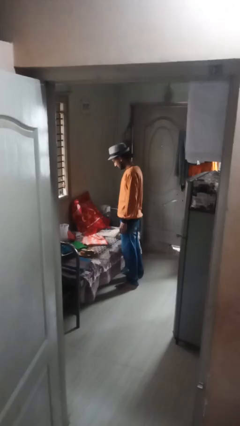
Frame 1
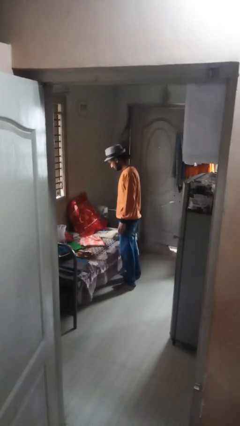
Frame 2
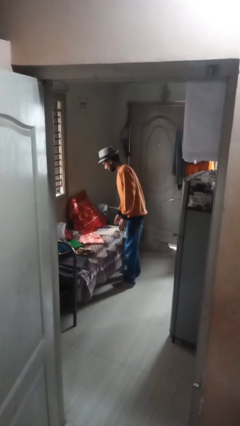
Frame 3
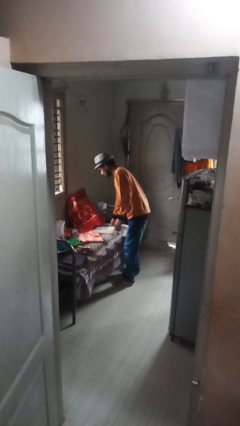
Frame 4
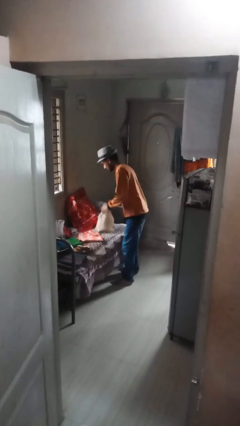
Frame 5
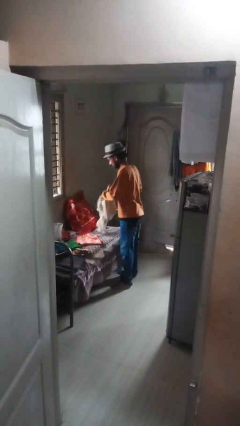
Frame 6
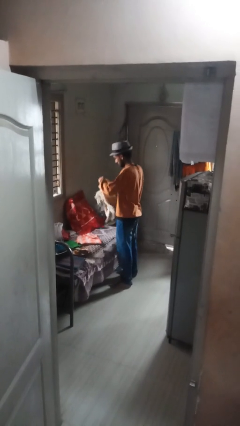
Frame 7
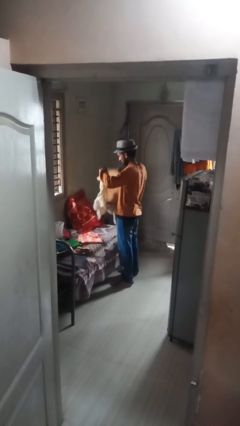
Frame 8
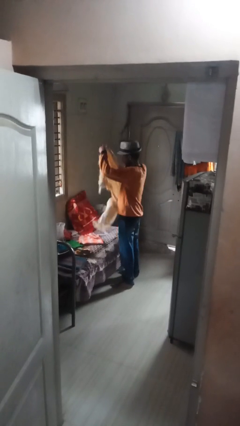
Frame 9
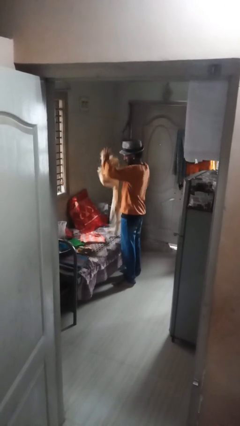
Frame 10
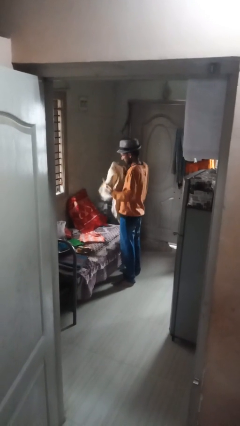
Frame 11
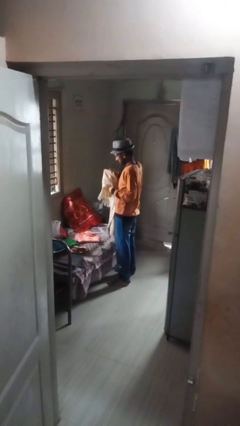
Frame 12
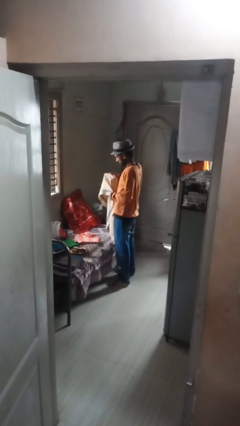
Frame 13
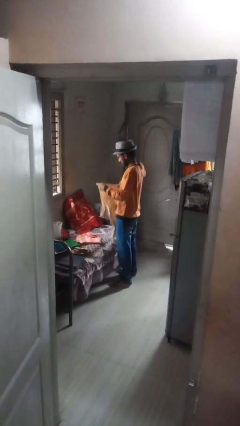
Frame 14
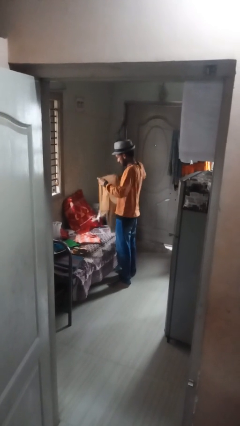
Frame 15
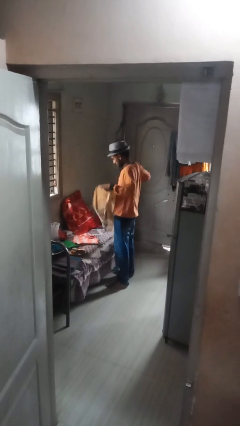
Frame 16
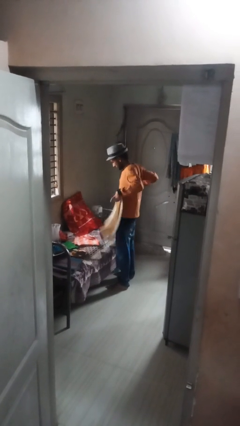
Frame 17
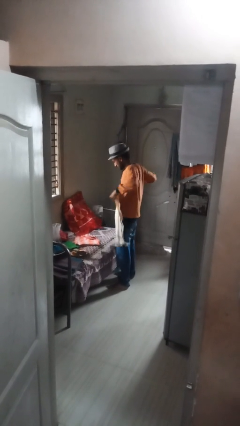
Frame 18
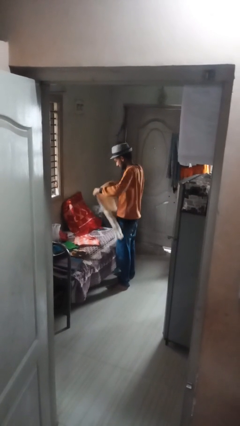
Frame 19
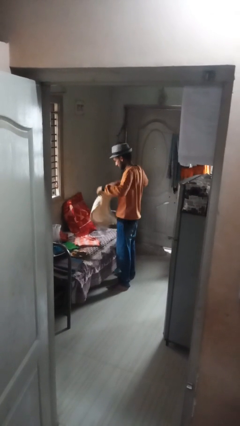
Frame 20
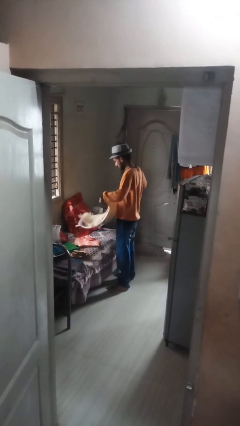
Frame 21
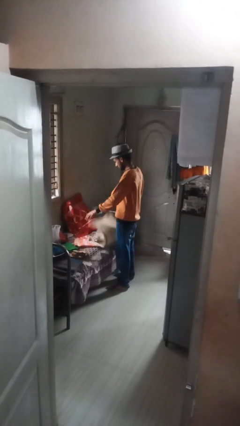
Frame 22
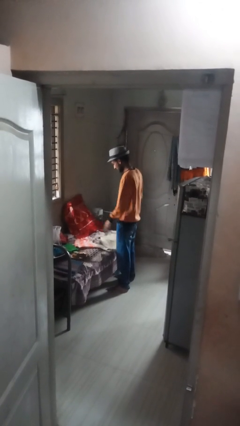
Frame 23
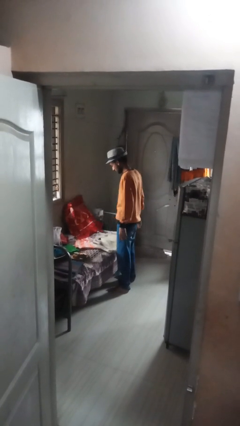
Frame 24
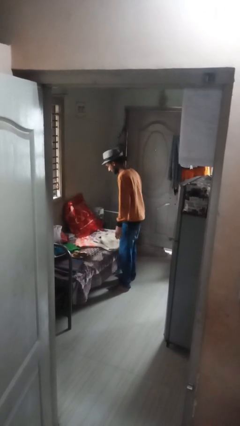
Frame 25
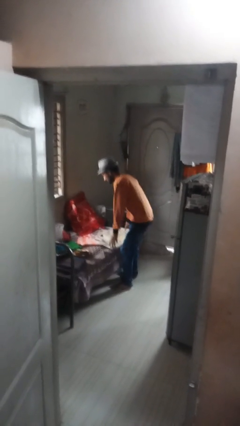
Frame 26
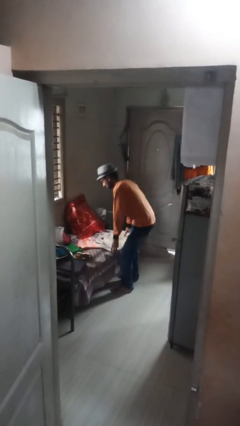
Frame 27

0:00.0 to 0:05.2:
person folds towel

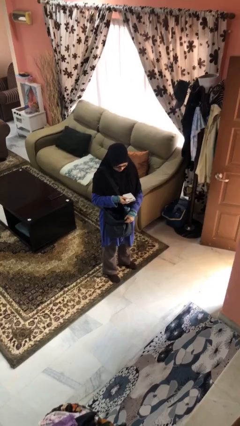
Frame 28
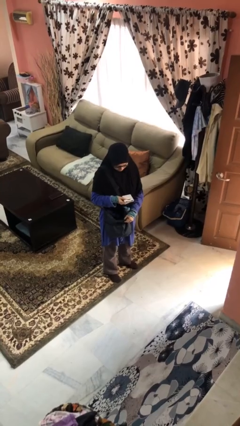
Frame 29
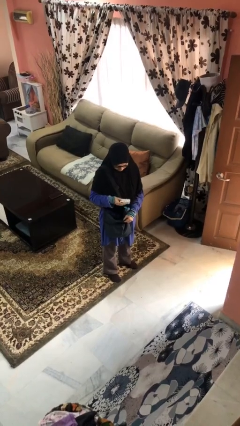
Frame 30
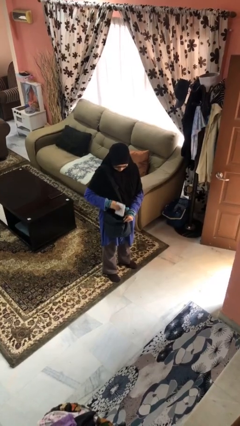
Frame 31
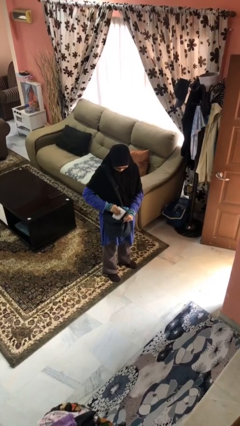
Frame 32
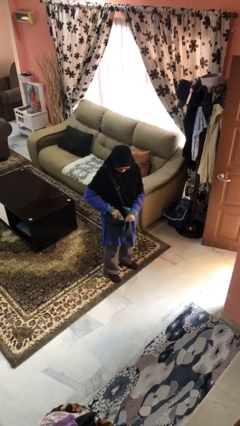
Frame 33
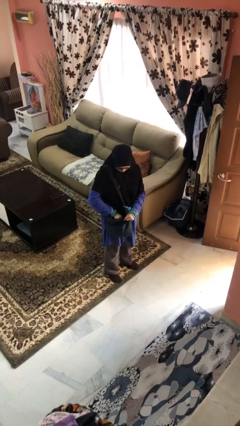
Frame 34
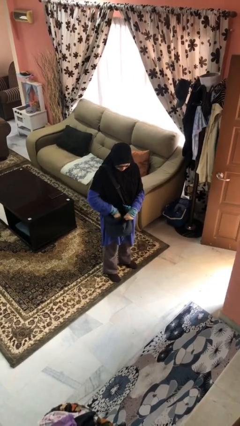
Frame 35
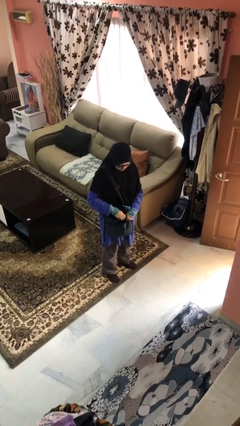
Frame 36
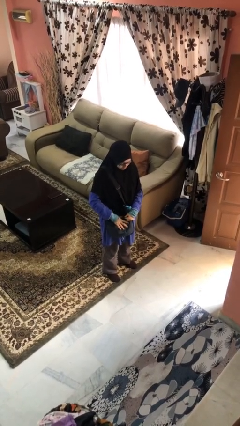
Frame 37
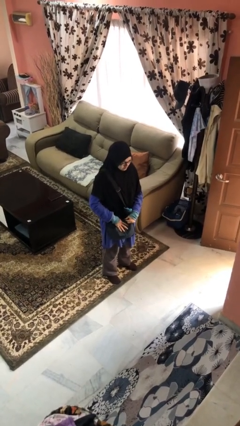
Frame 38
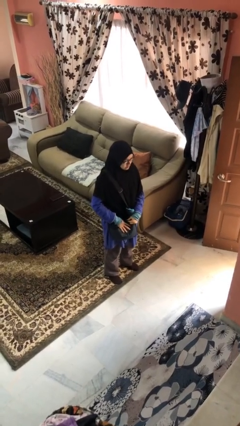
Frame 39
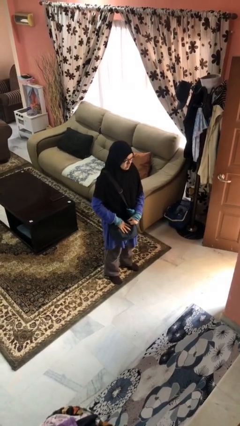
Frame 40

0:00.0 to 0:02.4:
person puts object into purse

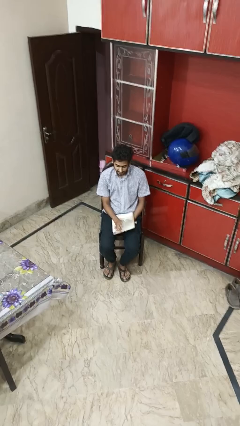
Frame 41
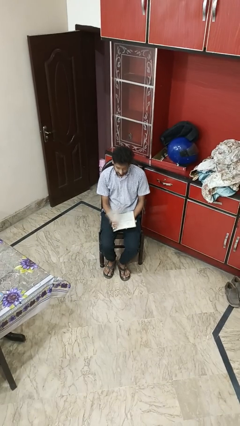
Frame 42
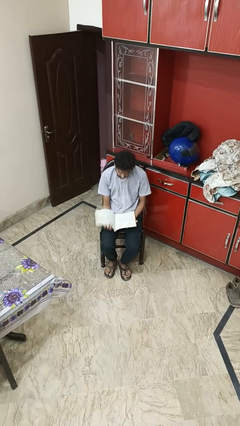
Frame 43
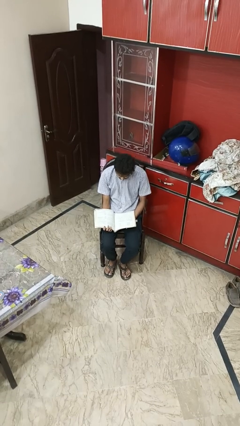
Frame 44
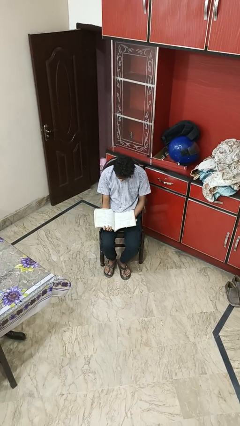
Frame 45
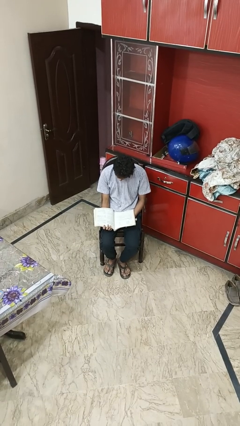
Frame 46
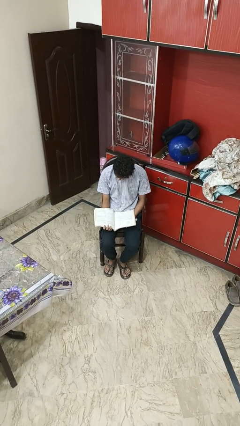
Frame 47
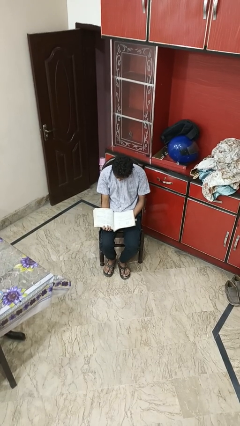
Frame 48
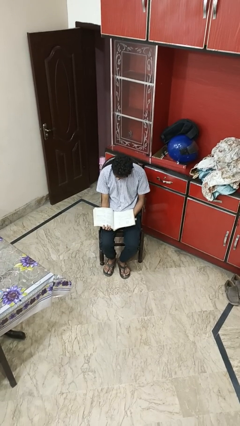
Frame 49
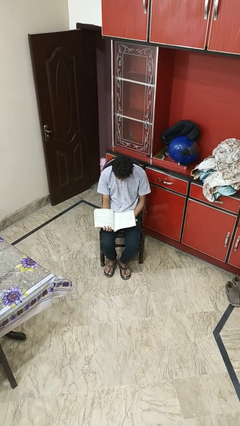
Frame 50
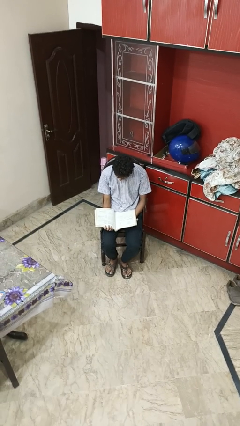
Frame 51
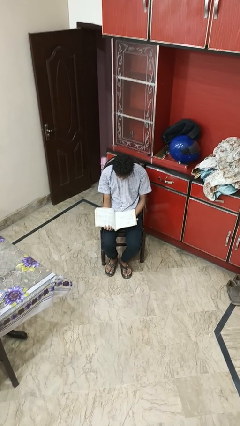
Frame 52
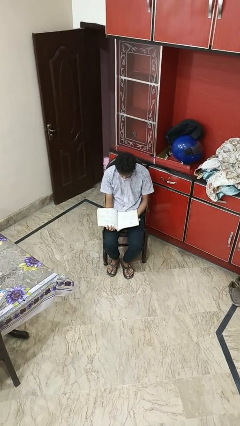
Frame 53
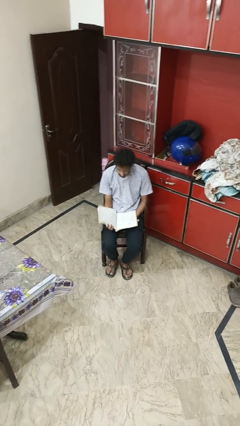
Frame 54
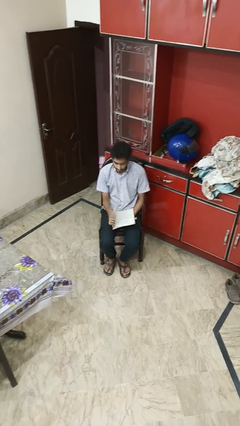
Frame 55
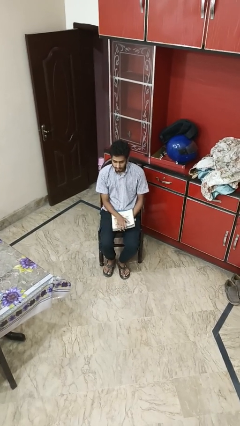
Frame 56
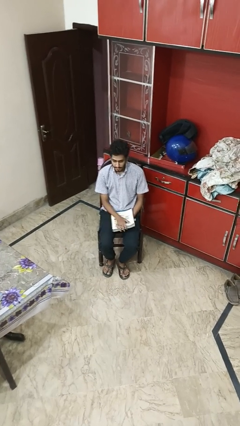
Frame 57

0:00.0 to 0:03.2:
person reads magazine

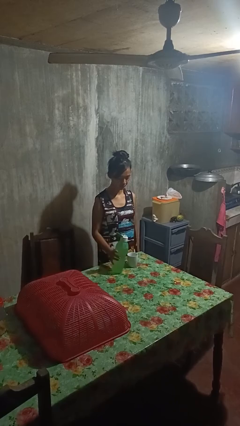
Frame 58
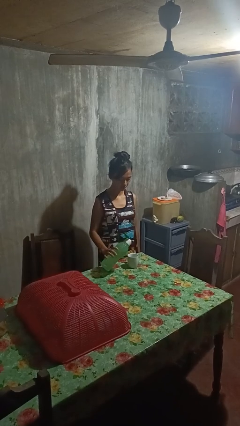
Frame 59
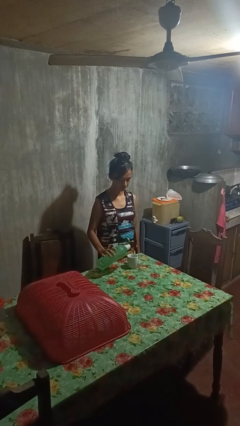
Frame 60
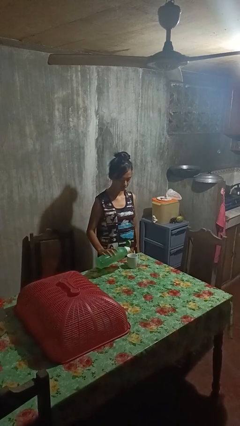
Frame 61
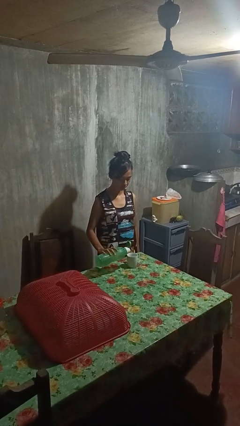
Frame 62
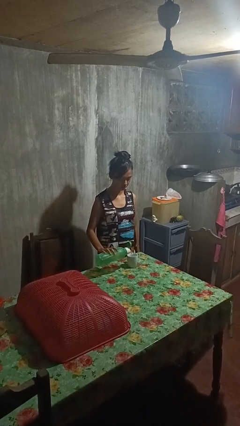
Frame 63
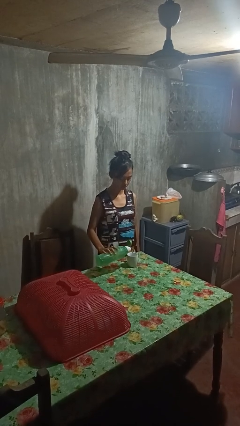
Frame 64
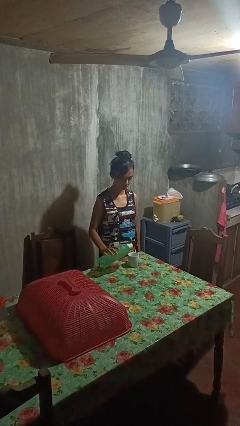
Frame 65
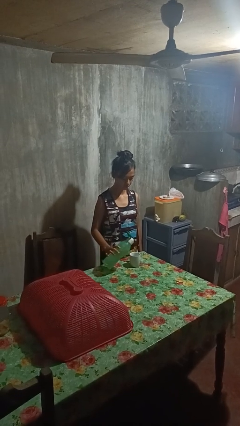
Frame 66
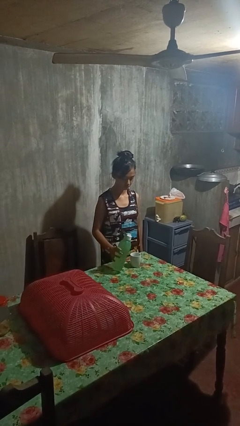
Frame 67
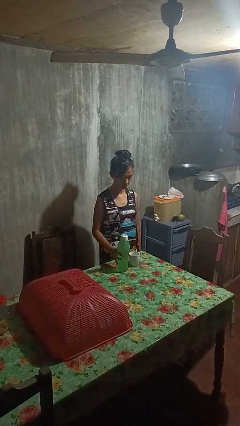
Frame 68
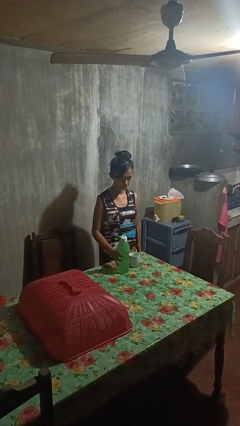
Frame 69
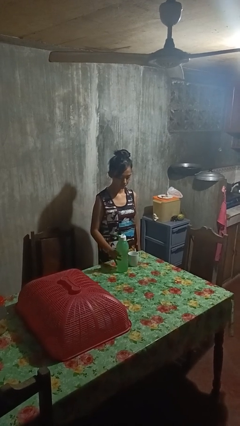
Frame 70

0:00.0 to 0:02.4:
person pours liquid into cup

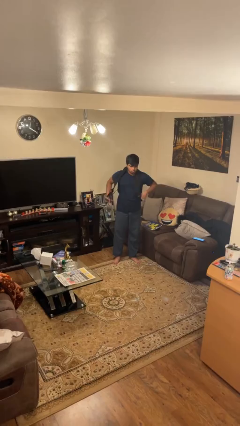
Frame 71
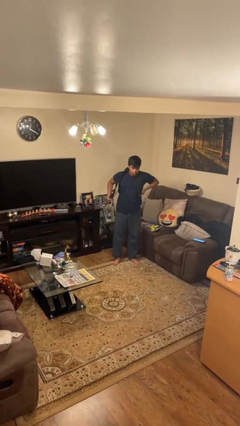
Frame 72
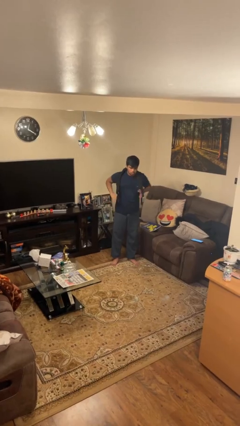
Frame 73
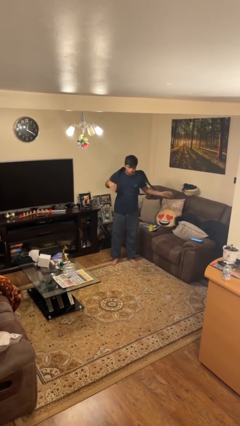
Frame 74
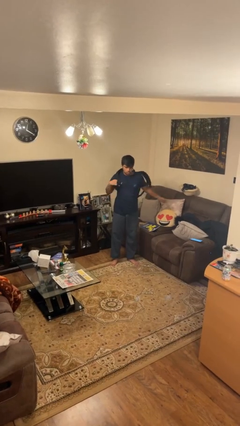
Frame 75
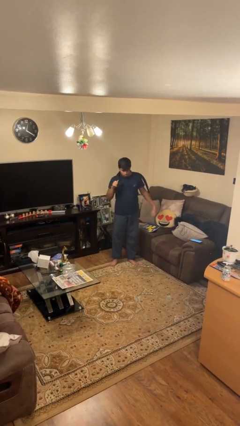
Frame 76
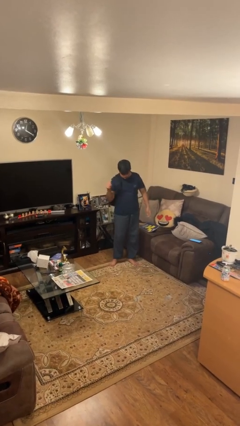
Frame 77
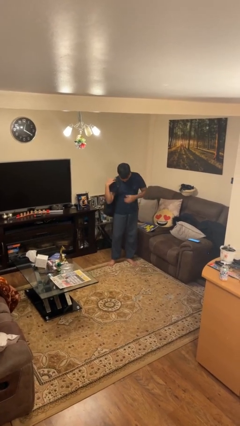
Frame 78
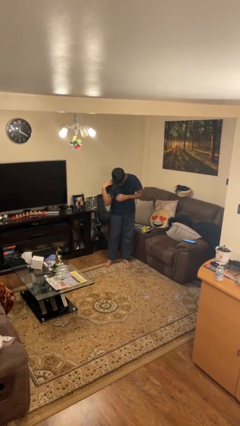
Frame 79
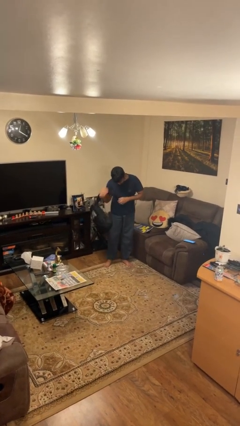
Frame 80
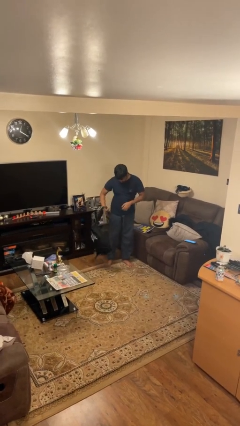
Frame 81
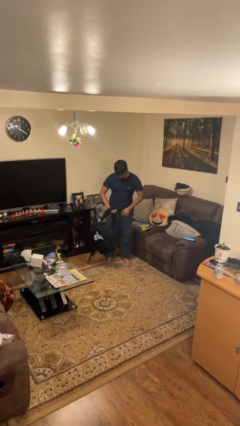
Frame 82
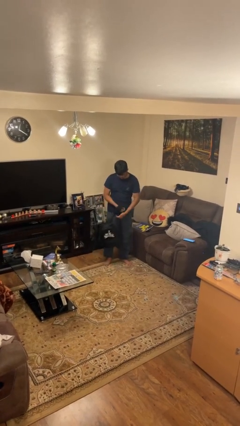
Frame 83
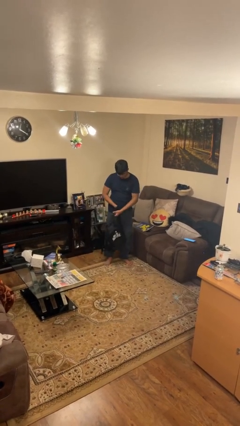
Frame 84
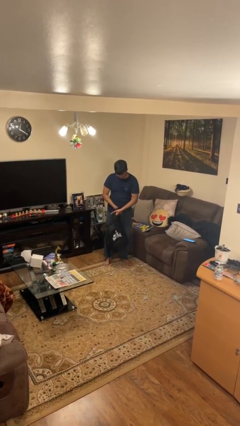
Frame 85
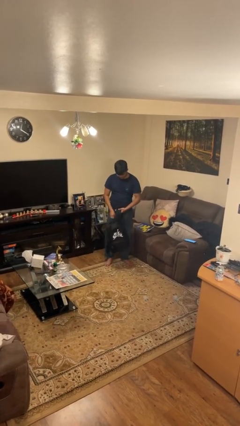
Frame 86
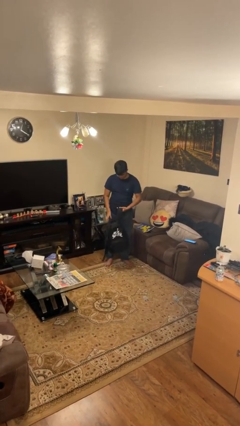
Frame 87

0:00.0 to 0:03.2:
person takes off backpack

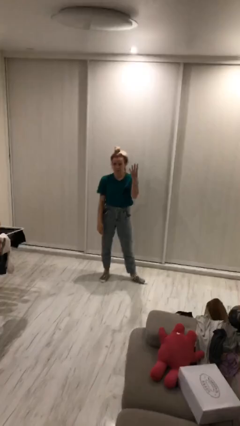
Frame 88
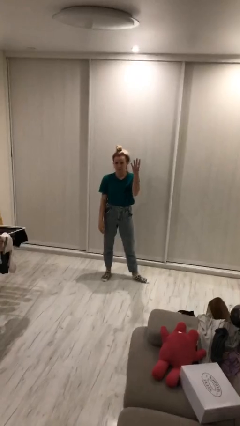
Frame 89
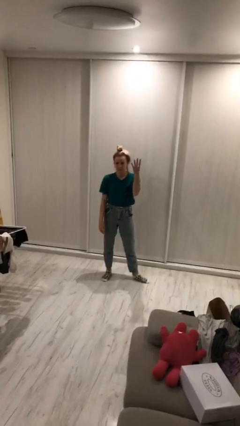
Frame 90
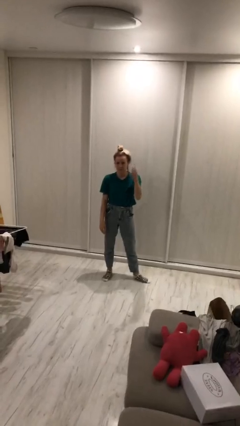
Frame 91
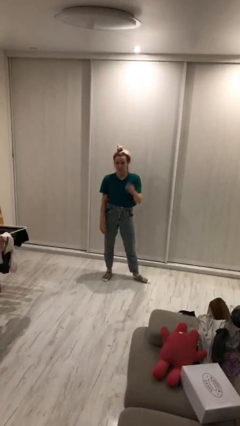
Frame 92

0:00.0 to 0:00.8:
person gestures number four
